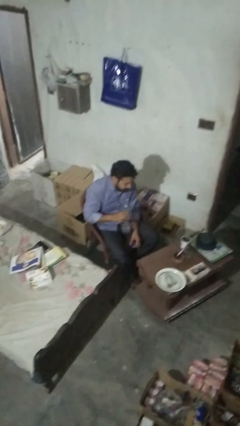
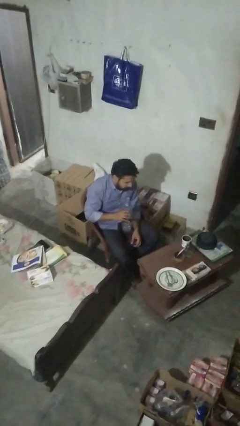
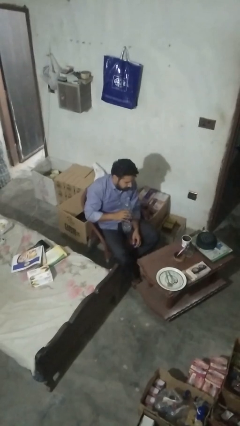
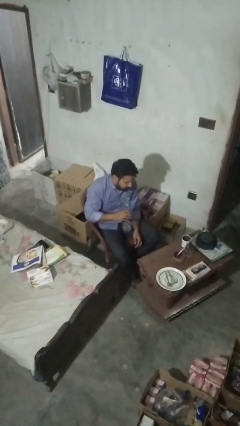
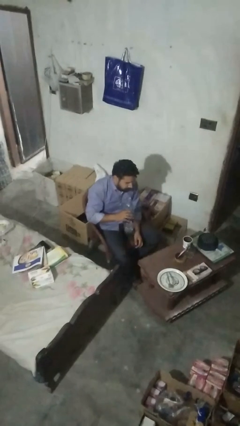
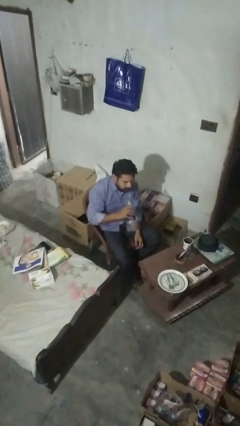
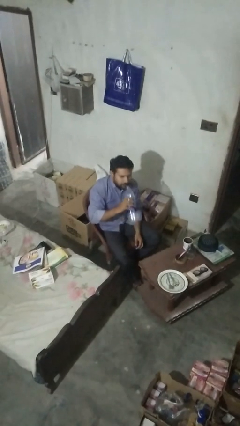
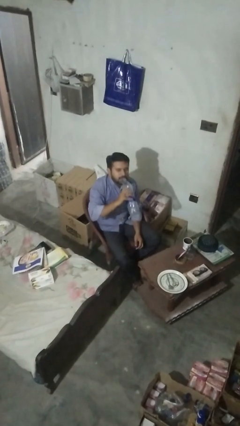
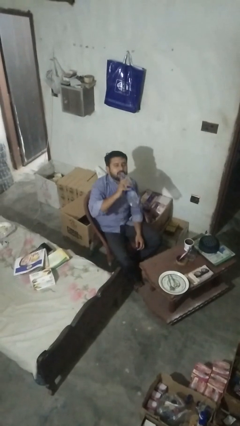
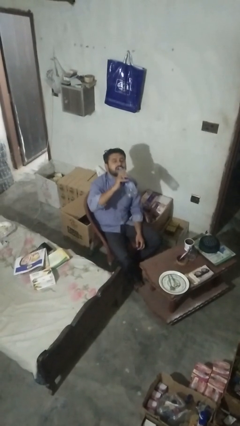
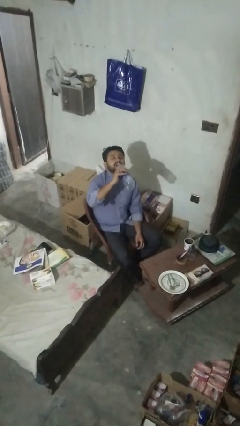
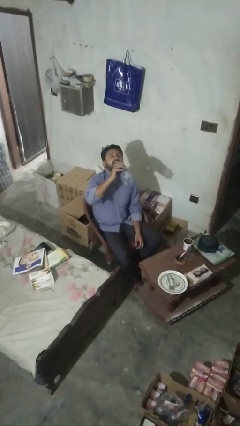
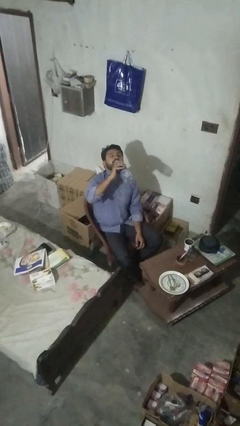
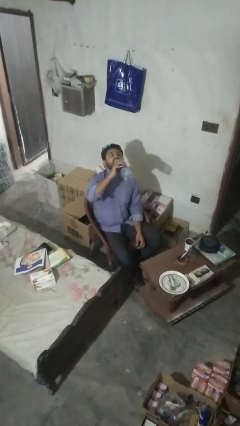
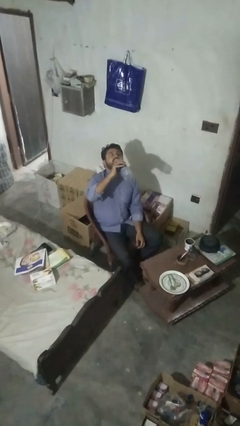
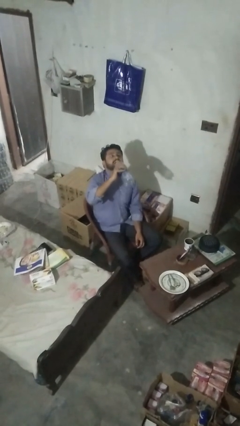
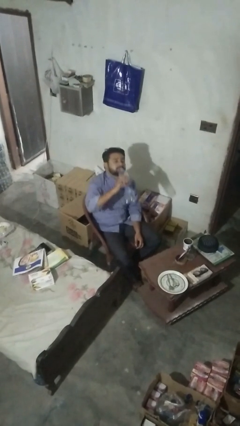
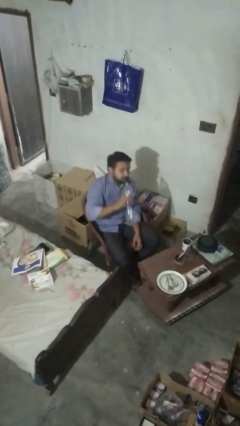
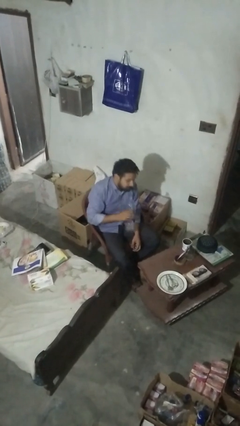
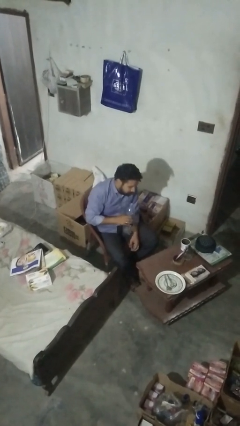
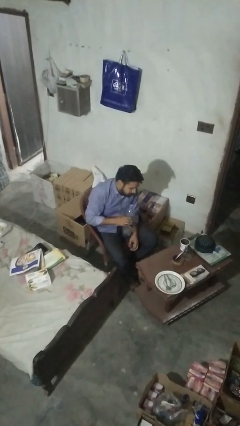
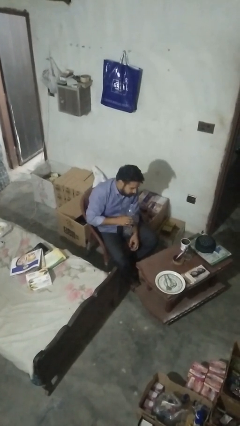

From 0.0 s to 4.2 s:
person drinks from bottle

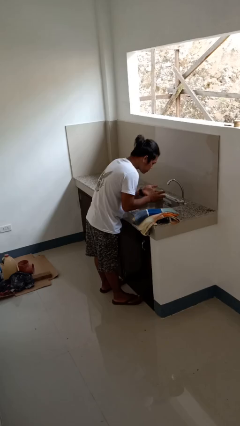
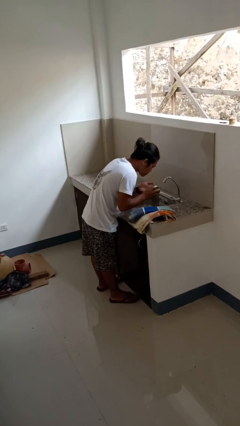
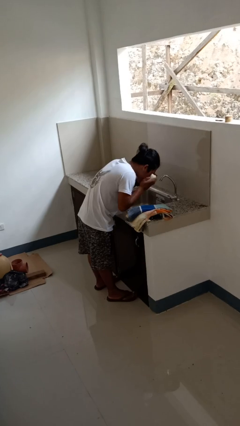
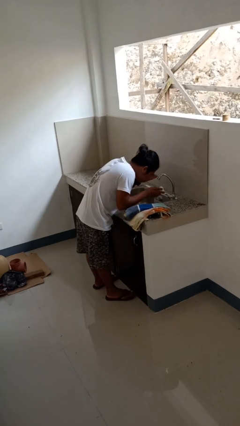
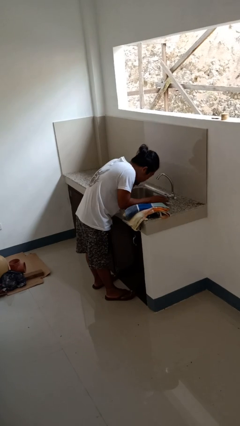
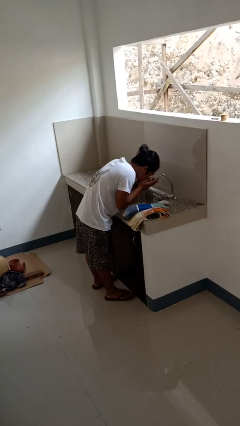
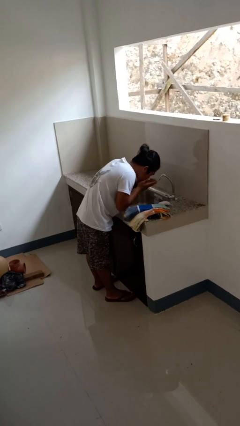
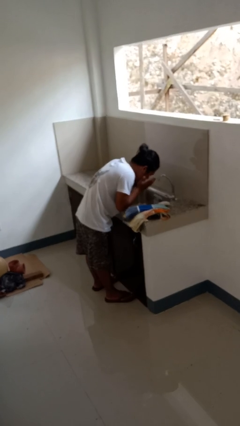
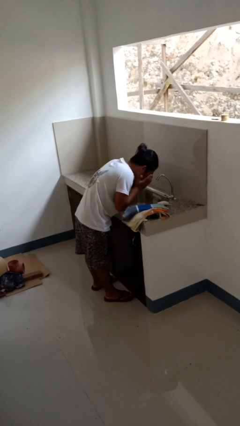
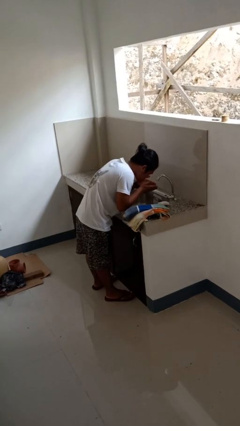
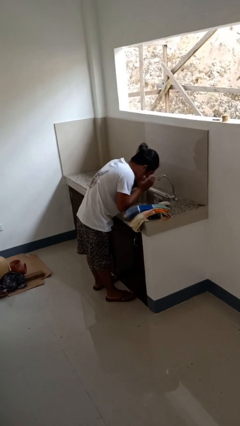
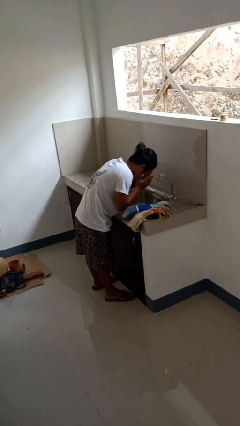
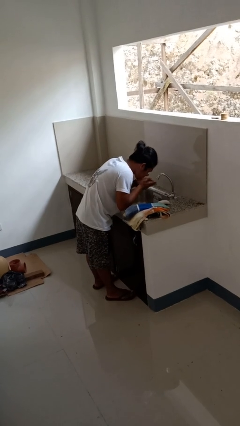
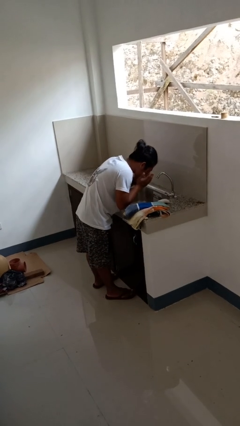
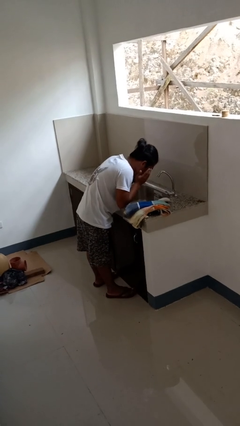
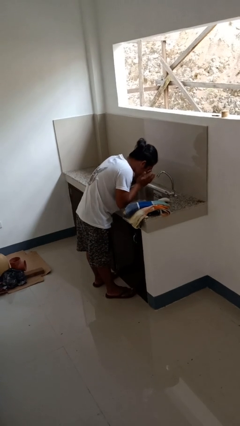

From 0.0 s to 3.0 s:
person washes face

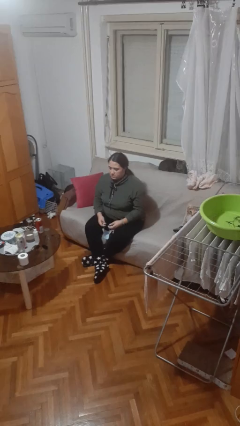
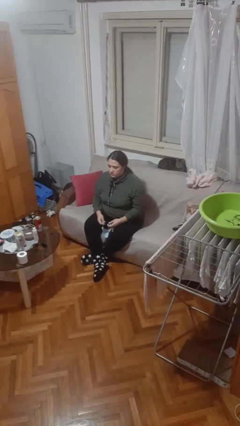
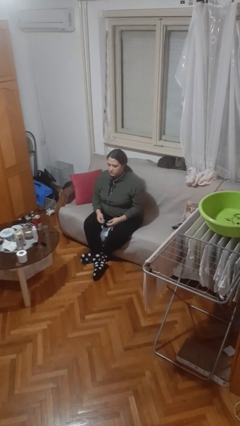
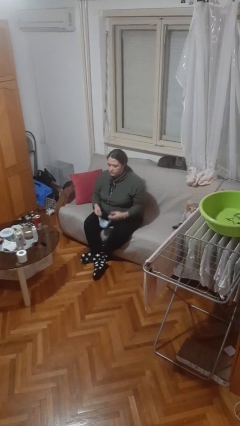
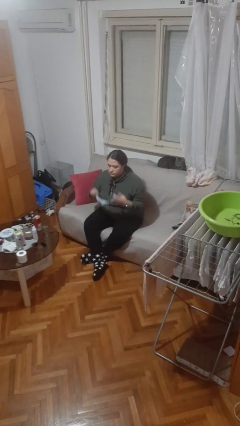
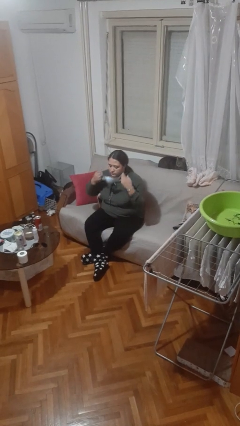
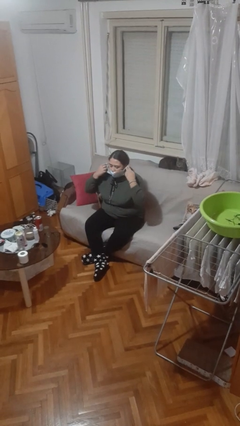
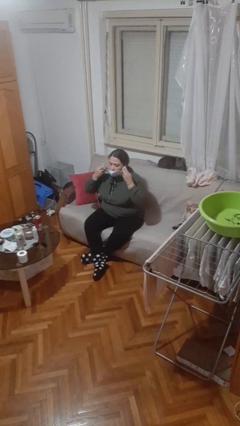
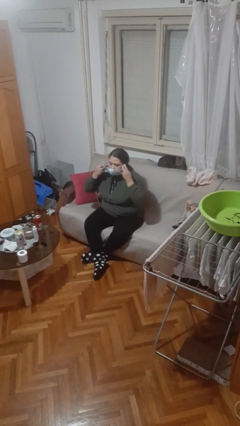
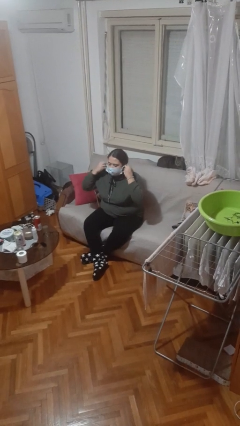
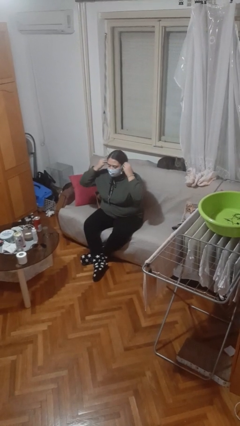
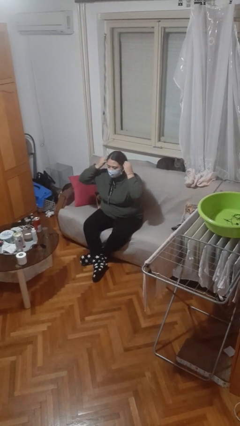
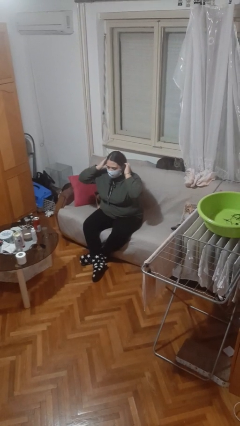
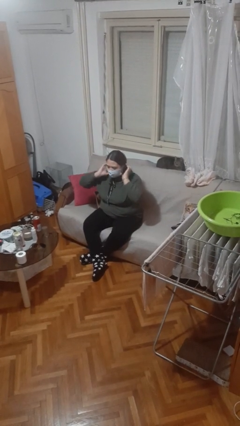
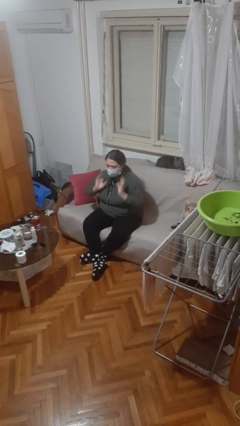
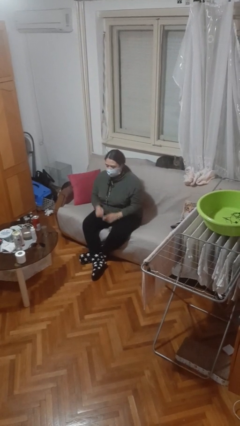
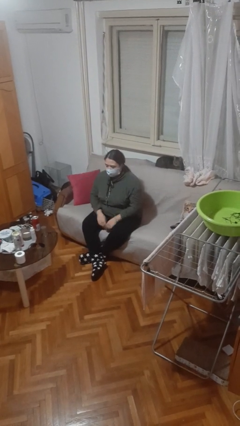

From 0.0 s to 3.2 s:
person puts on facemask

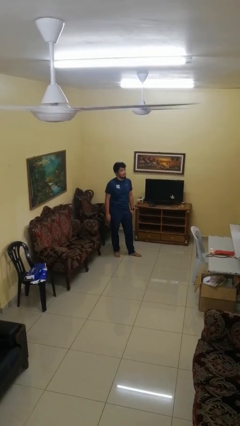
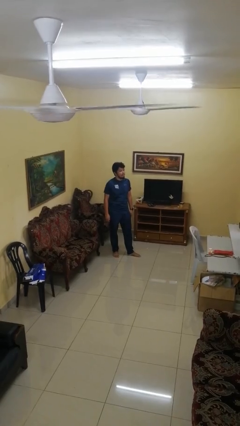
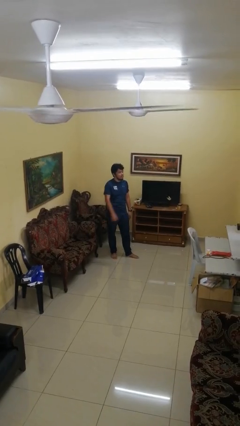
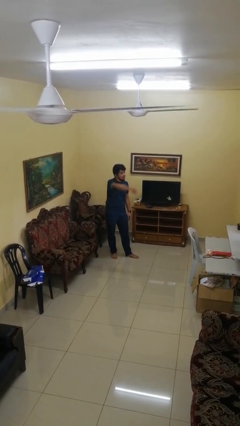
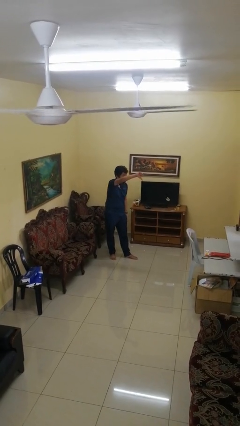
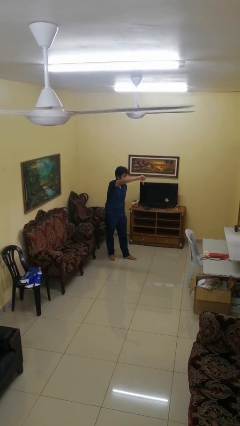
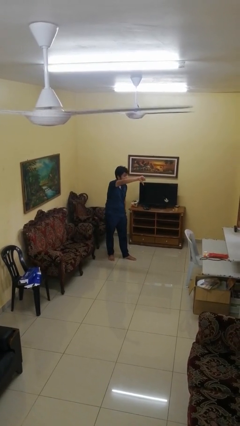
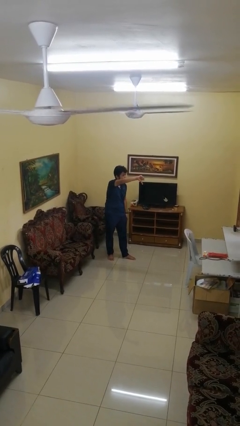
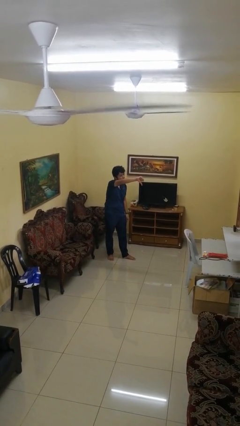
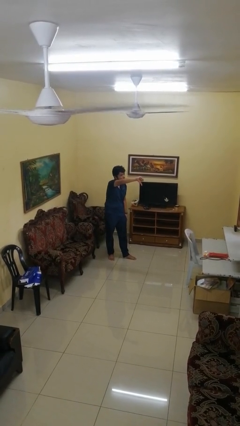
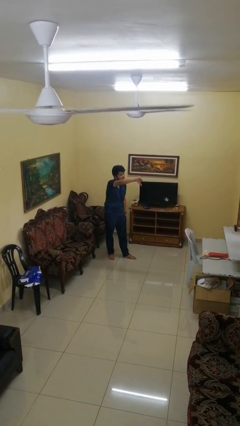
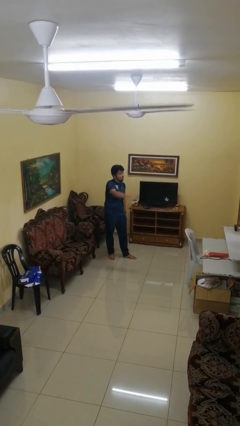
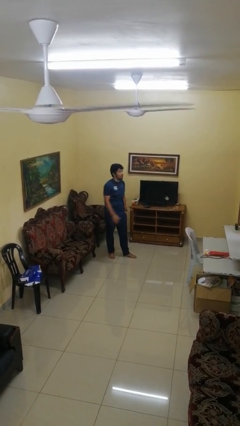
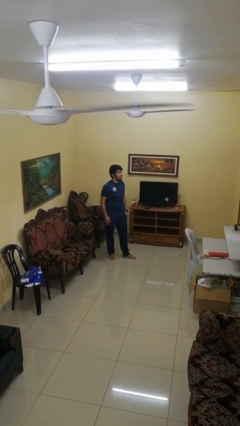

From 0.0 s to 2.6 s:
person gestures thumbs down

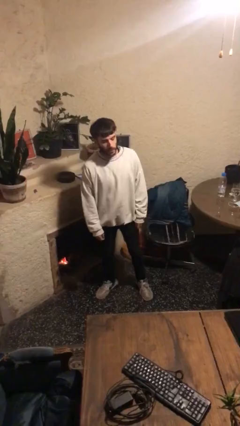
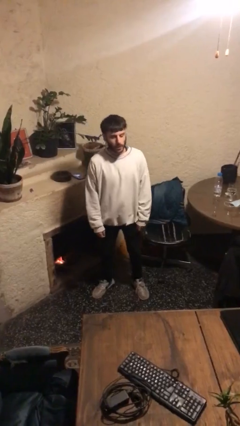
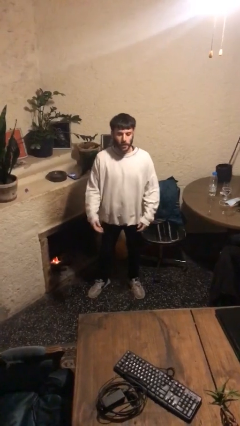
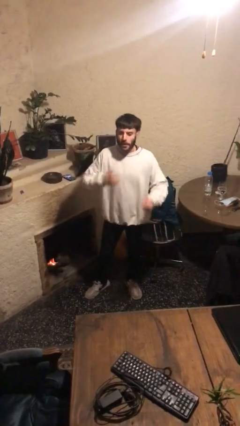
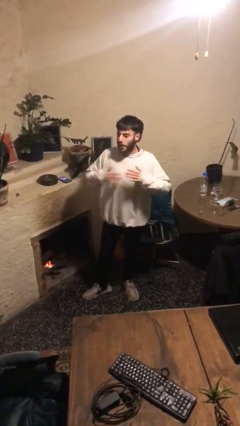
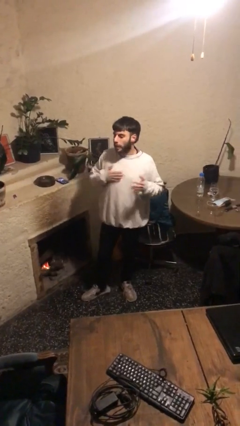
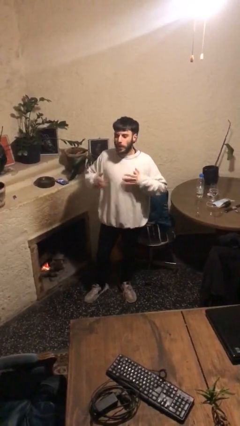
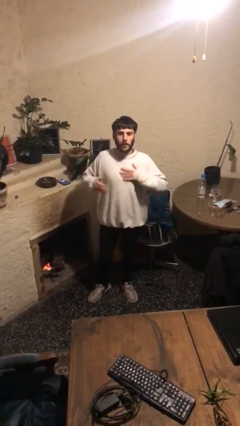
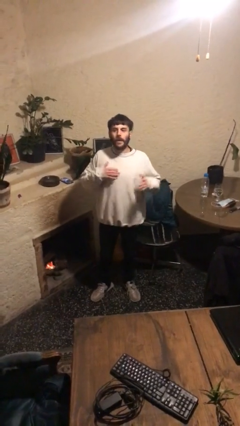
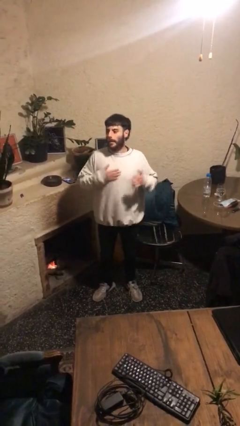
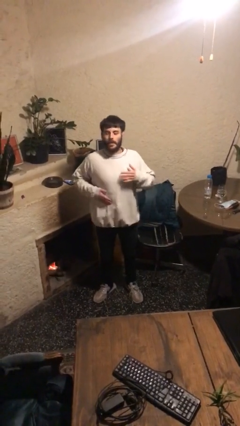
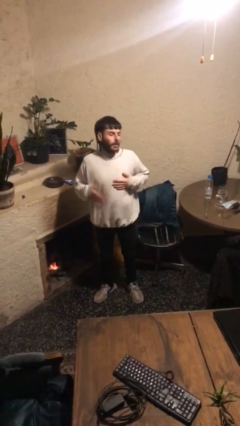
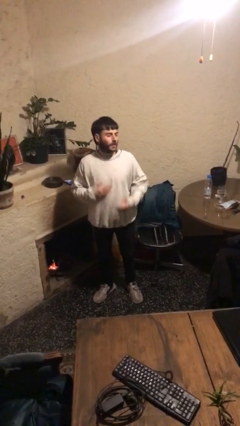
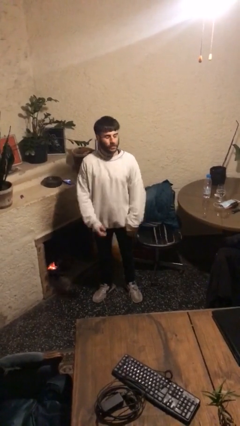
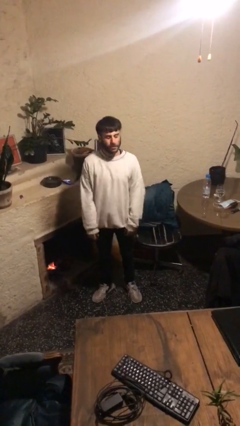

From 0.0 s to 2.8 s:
person drums on chest

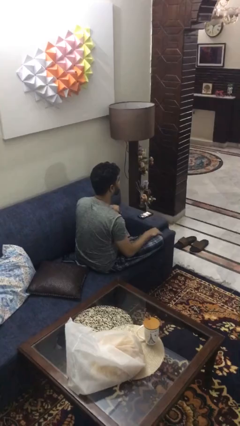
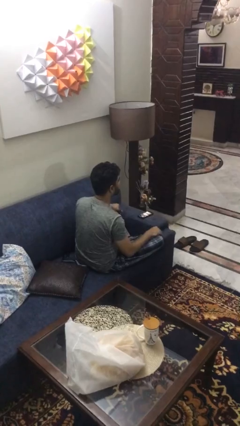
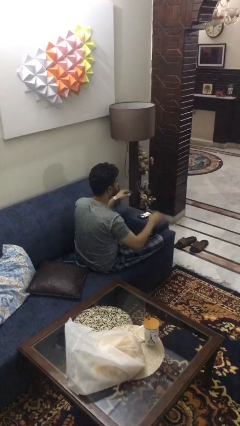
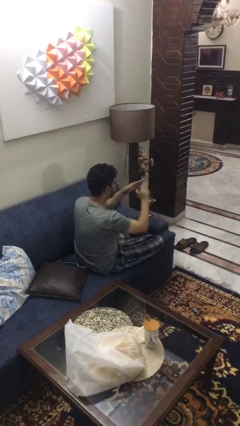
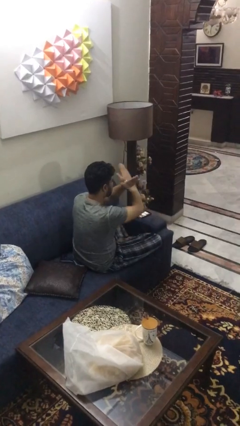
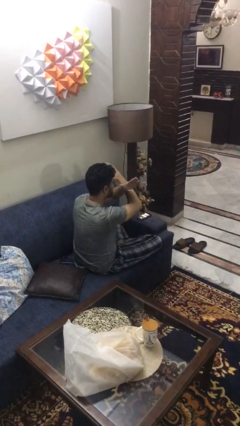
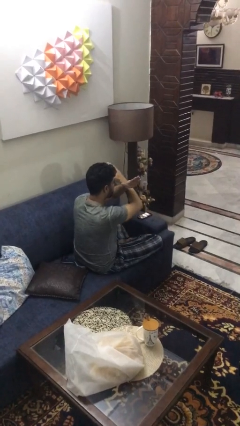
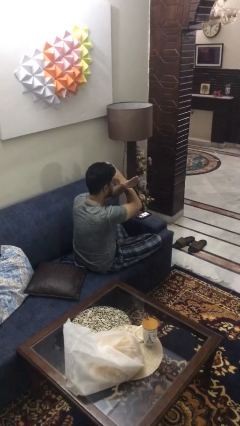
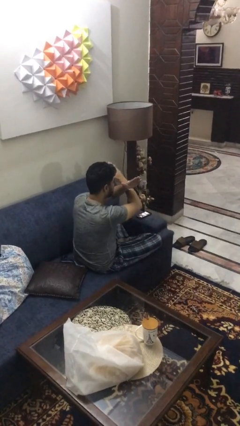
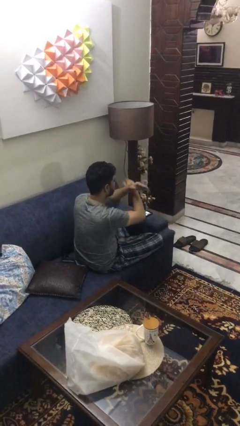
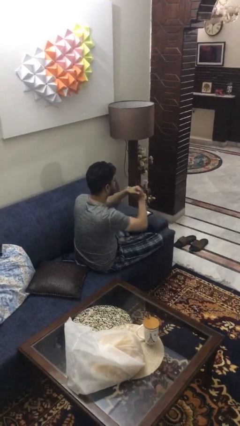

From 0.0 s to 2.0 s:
person gestures arms x
